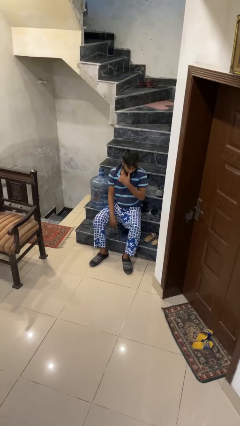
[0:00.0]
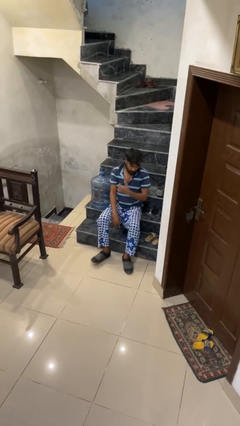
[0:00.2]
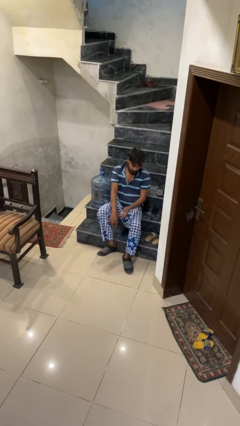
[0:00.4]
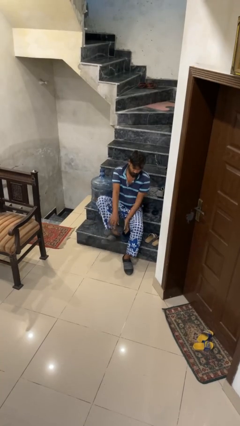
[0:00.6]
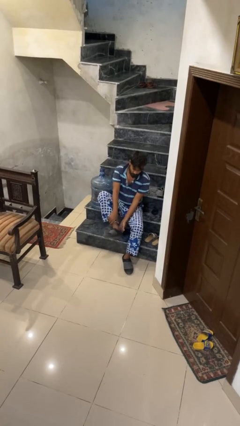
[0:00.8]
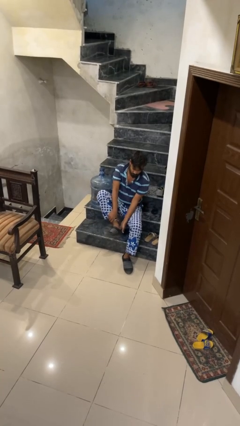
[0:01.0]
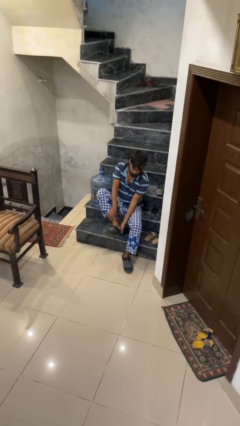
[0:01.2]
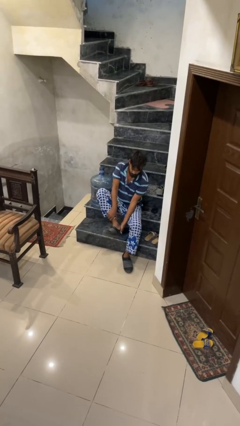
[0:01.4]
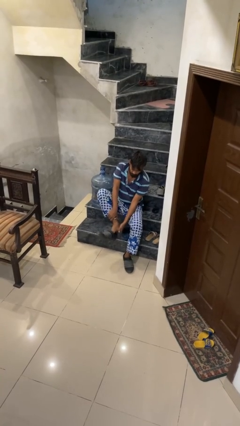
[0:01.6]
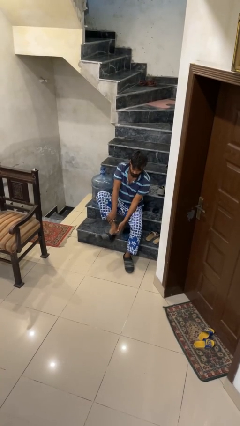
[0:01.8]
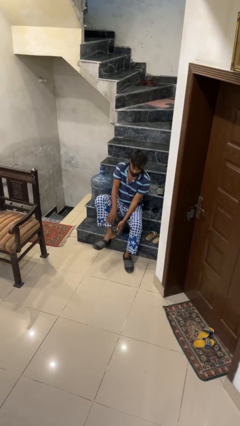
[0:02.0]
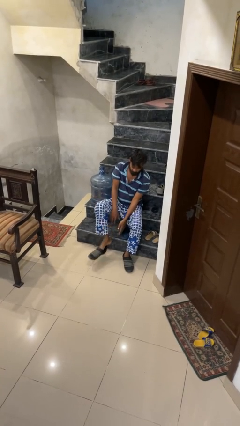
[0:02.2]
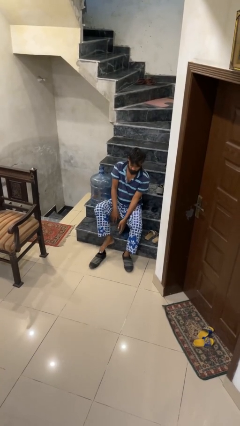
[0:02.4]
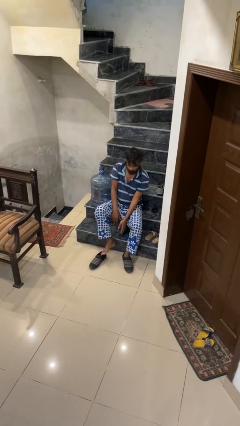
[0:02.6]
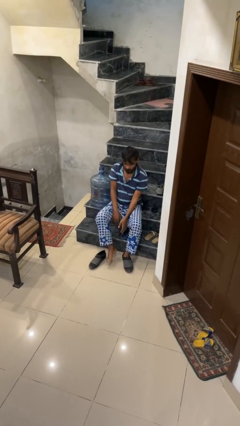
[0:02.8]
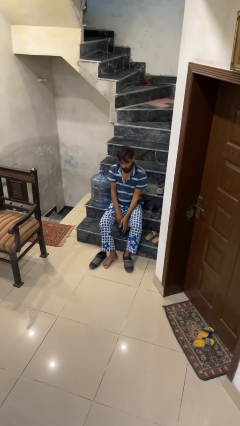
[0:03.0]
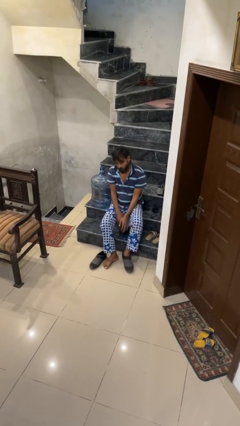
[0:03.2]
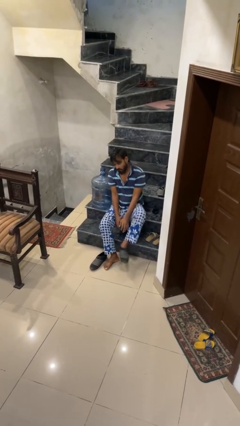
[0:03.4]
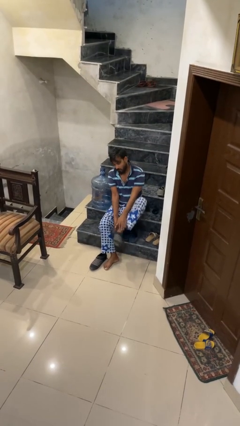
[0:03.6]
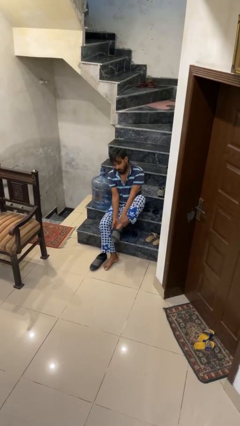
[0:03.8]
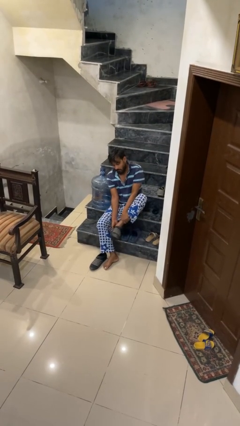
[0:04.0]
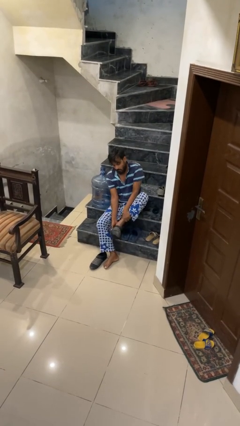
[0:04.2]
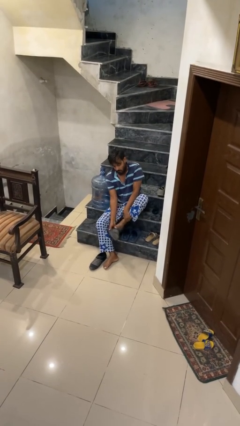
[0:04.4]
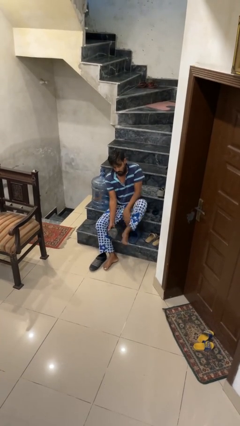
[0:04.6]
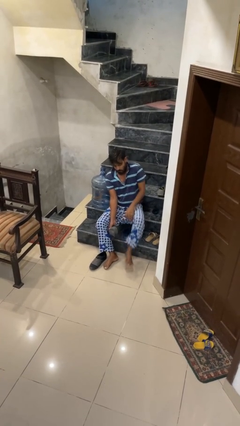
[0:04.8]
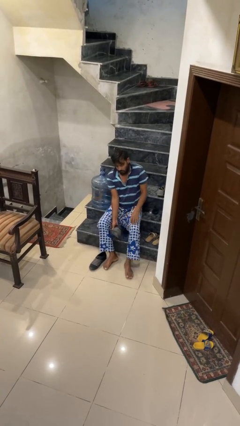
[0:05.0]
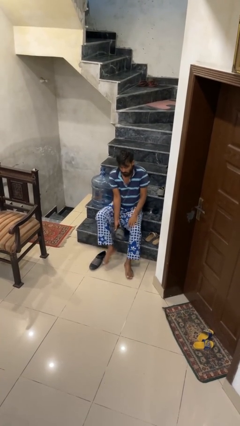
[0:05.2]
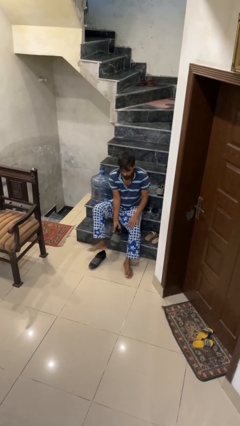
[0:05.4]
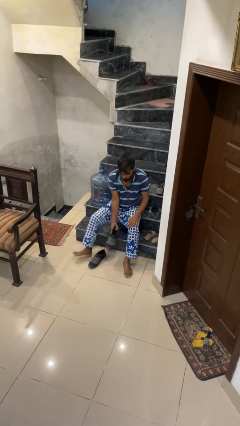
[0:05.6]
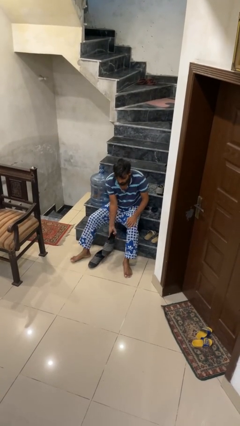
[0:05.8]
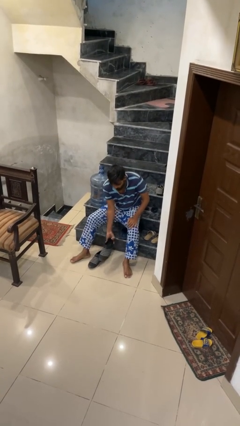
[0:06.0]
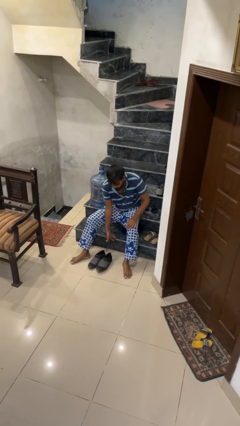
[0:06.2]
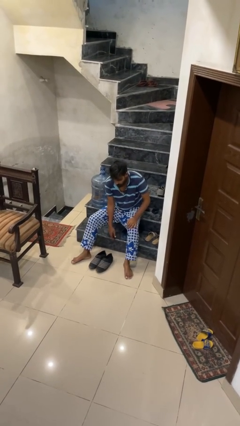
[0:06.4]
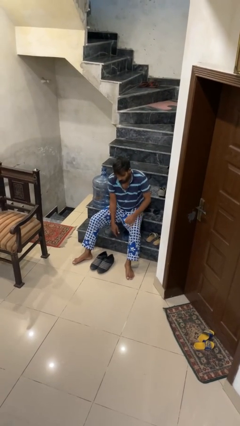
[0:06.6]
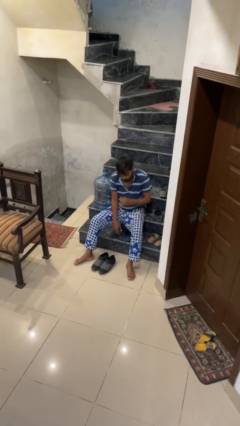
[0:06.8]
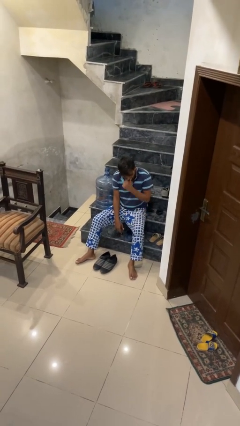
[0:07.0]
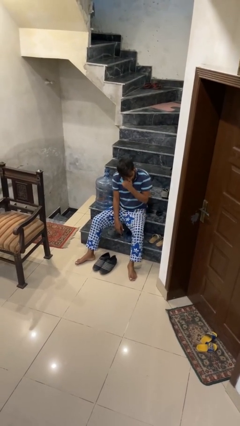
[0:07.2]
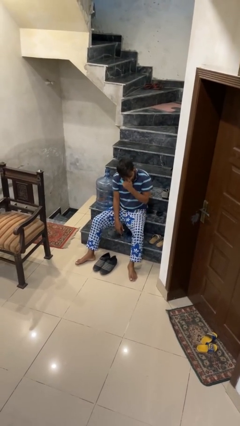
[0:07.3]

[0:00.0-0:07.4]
person takes off shoes

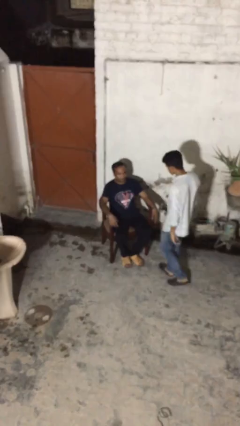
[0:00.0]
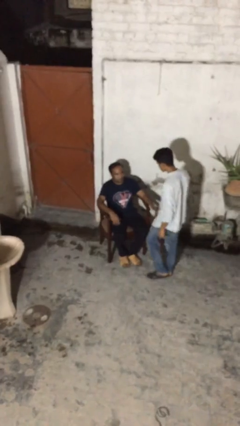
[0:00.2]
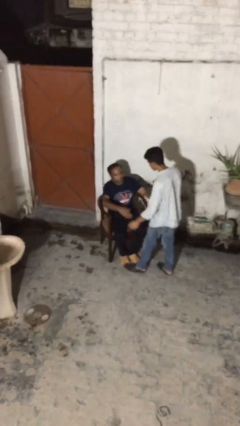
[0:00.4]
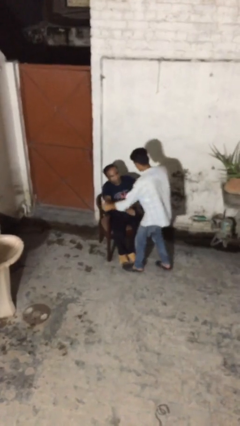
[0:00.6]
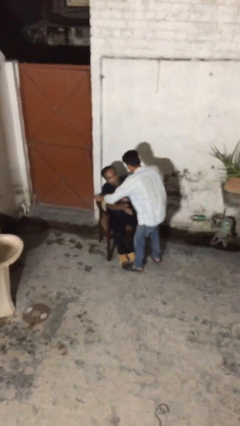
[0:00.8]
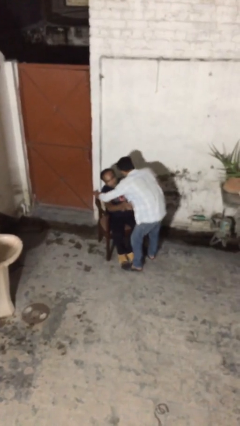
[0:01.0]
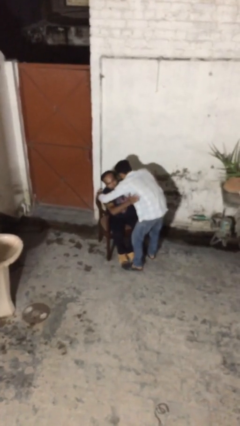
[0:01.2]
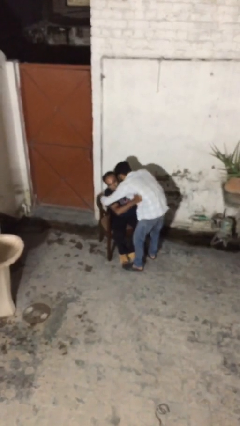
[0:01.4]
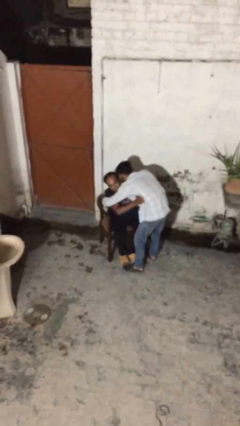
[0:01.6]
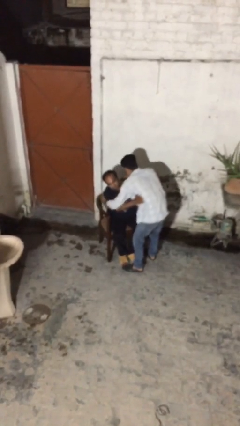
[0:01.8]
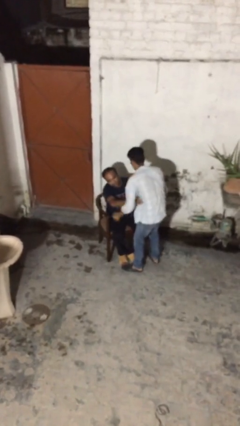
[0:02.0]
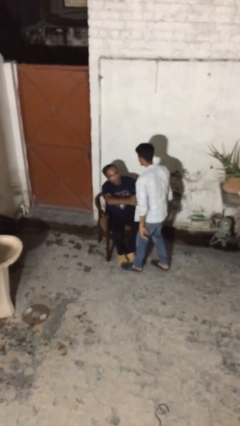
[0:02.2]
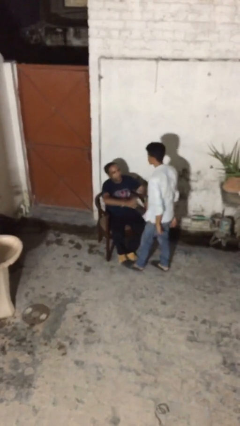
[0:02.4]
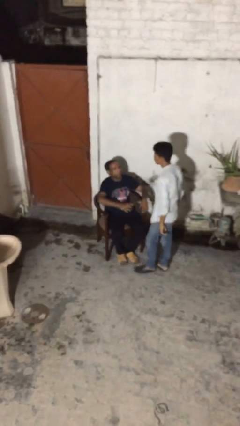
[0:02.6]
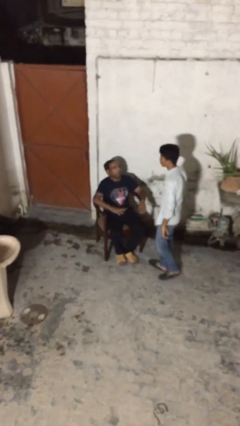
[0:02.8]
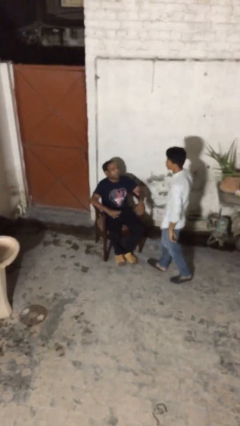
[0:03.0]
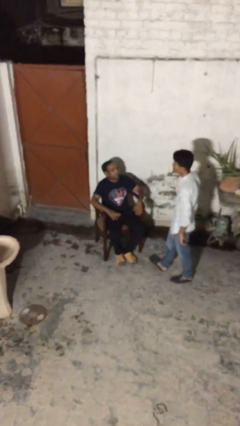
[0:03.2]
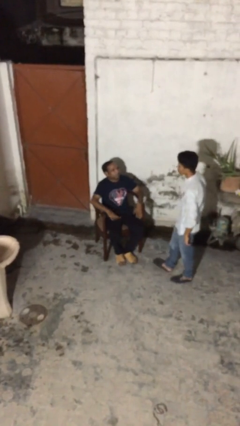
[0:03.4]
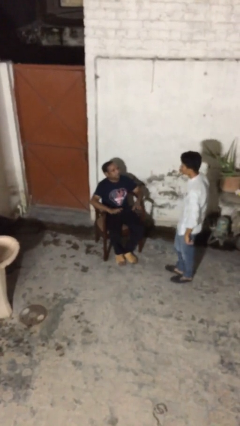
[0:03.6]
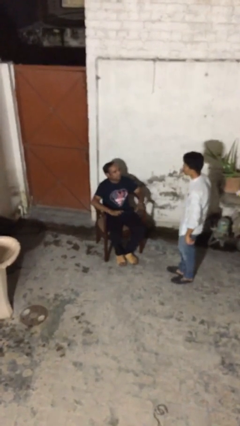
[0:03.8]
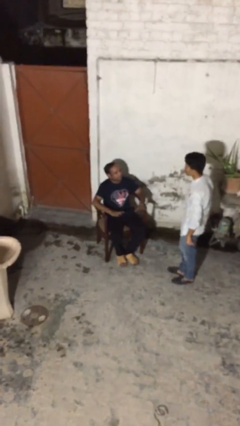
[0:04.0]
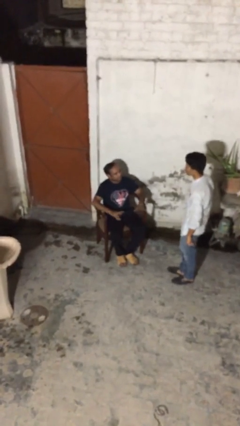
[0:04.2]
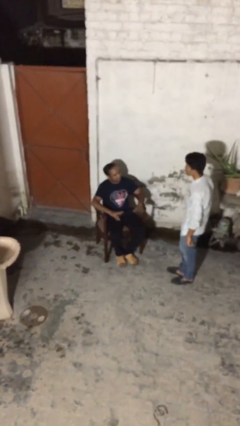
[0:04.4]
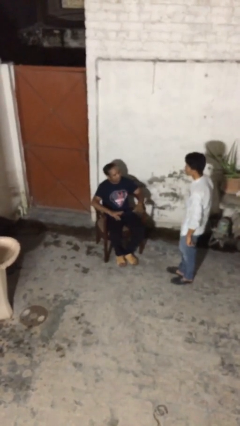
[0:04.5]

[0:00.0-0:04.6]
person embraces person

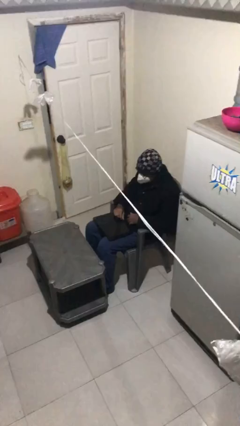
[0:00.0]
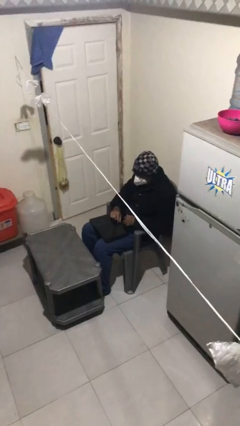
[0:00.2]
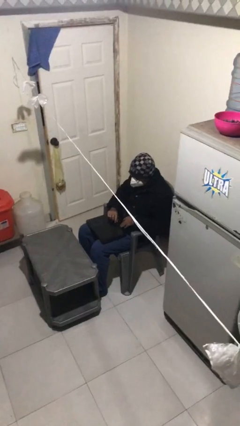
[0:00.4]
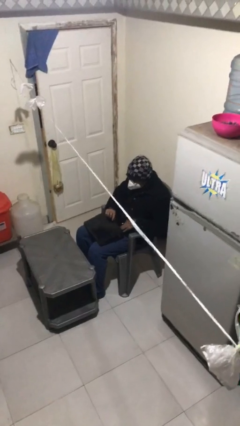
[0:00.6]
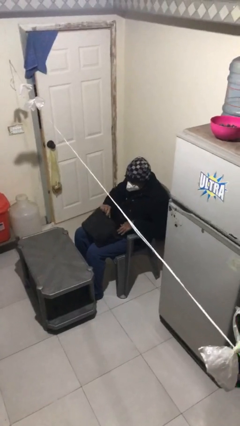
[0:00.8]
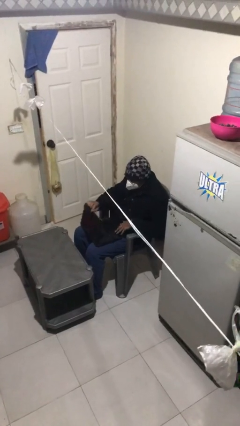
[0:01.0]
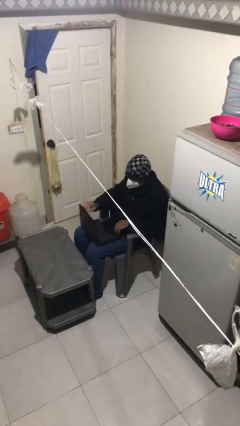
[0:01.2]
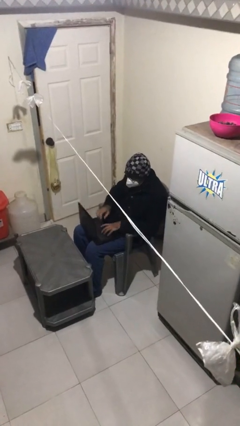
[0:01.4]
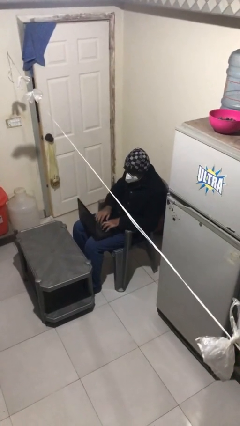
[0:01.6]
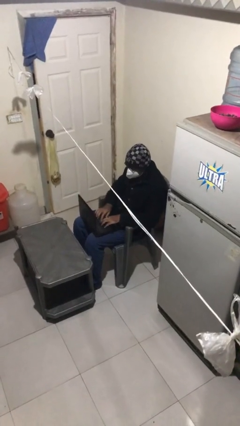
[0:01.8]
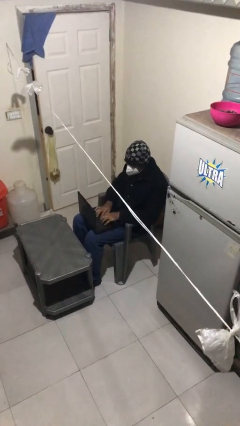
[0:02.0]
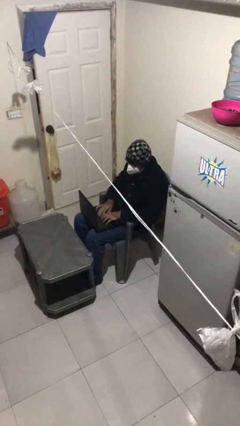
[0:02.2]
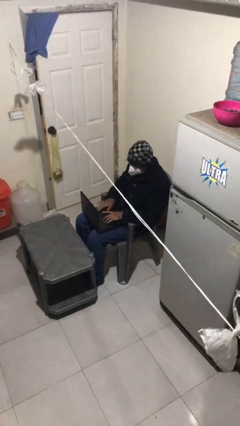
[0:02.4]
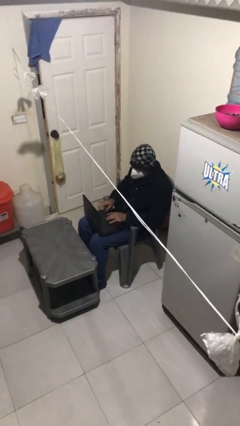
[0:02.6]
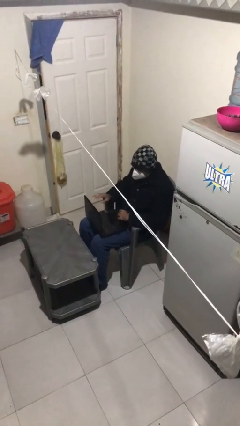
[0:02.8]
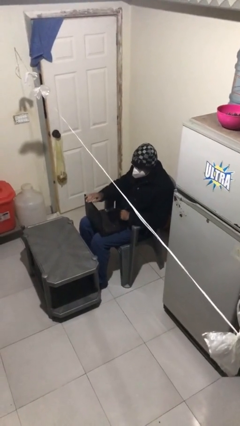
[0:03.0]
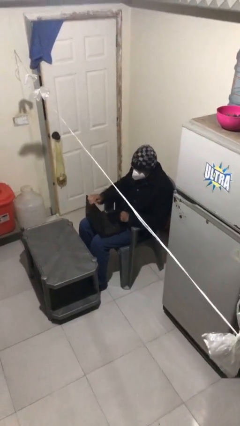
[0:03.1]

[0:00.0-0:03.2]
person interacts with laptop

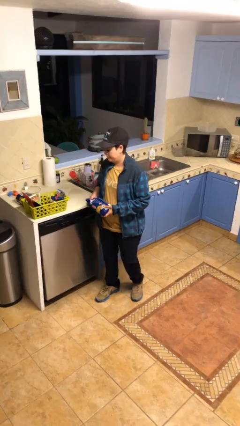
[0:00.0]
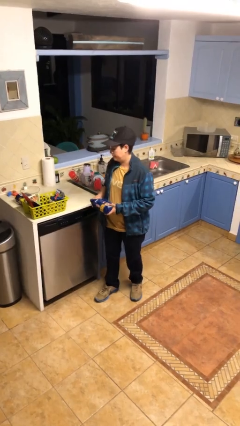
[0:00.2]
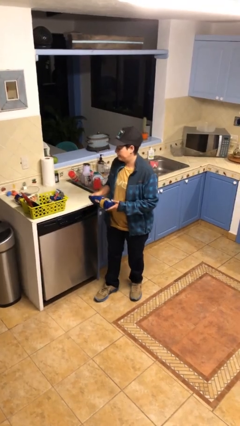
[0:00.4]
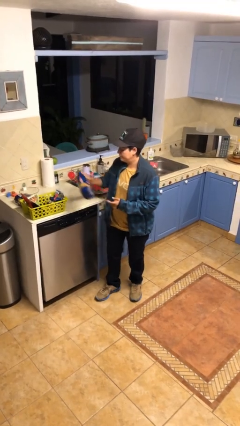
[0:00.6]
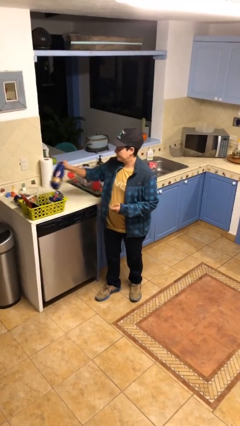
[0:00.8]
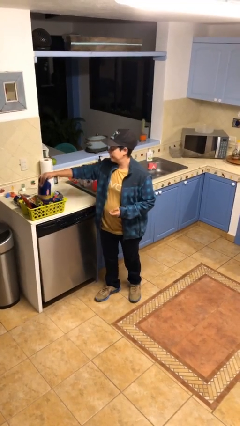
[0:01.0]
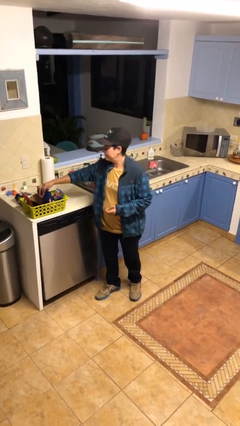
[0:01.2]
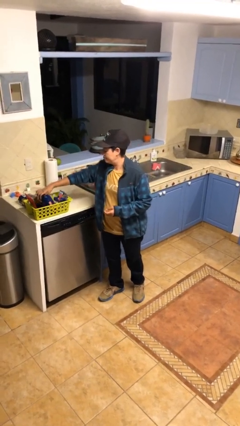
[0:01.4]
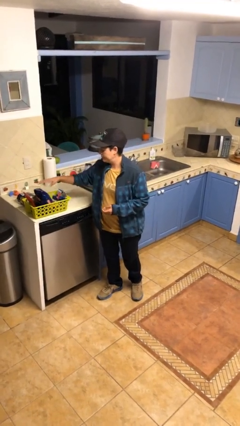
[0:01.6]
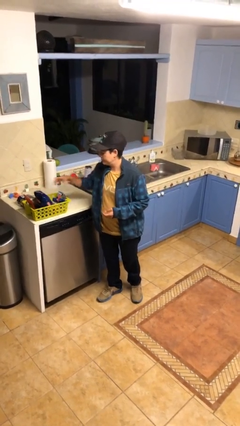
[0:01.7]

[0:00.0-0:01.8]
person puts object into basket

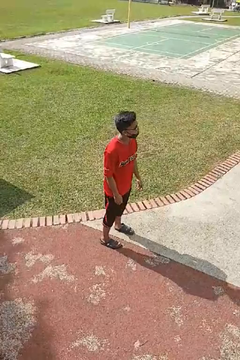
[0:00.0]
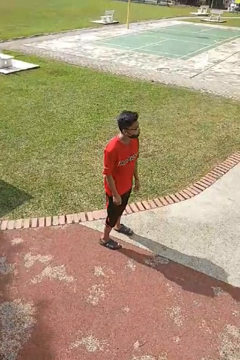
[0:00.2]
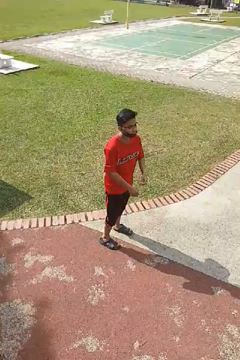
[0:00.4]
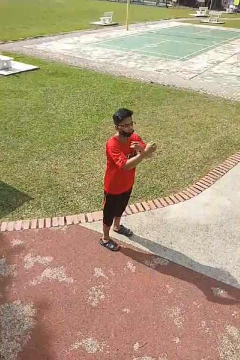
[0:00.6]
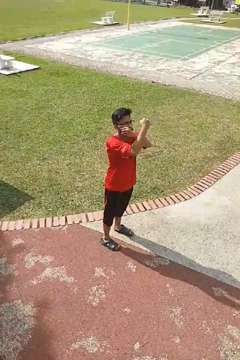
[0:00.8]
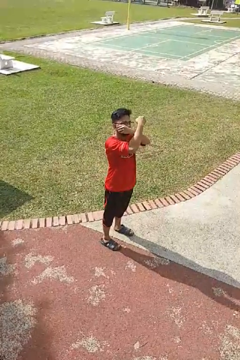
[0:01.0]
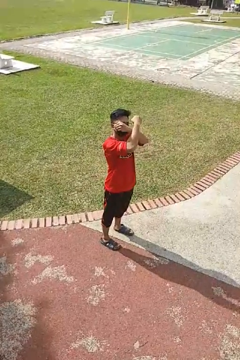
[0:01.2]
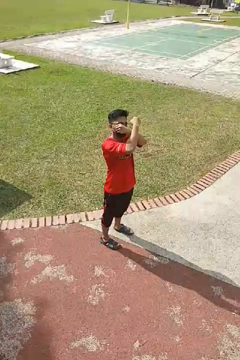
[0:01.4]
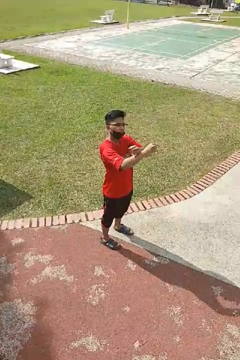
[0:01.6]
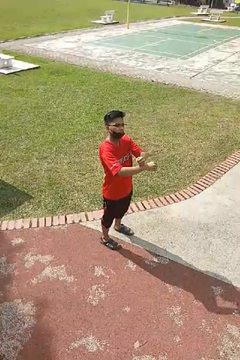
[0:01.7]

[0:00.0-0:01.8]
person gestures arms x
